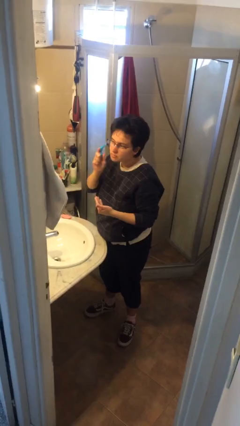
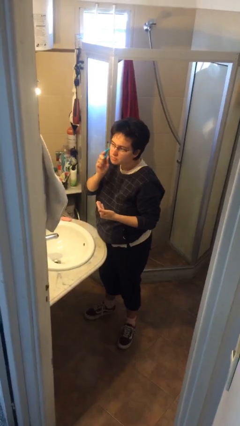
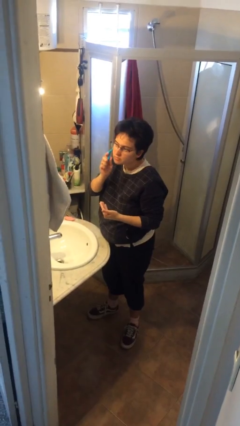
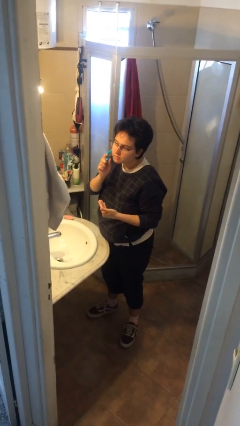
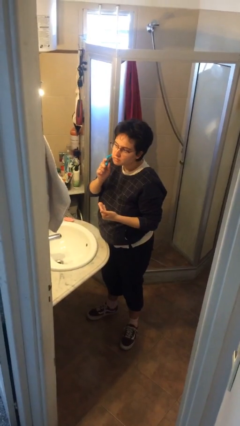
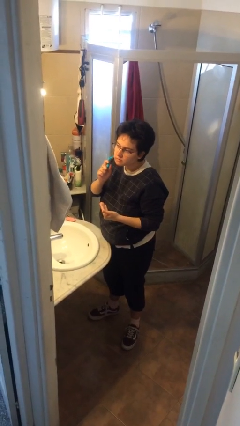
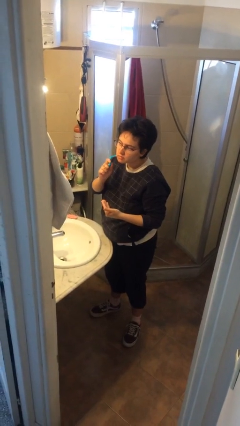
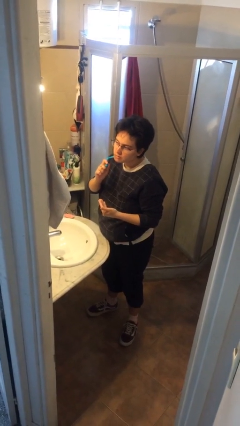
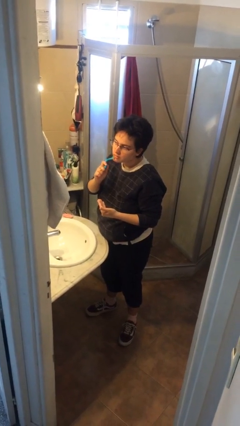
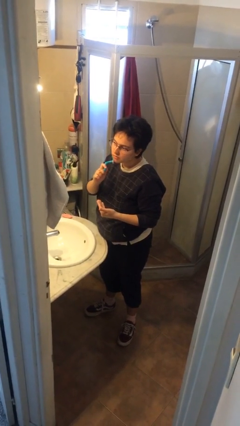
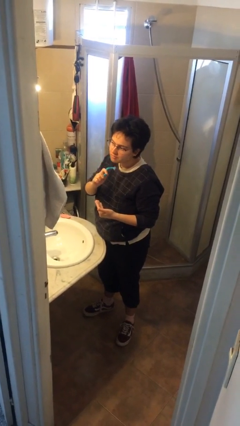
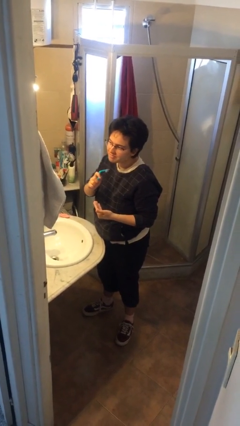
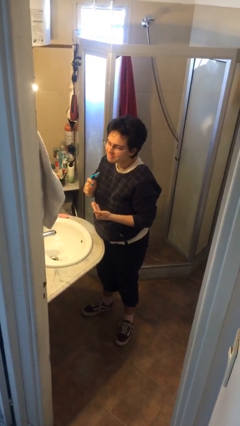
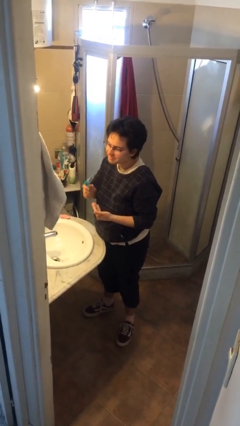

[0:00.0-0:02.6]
person shaves face

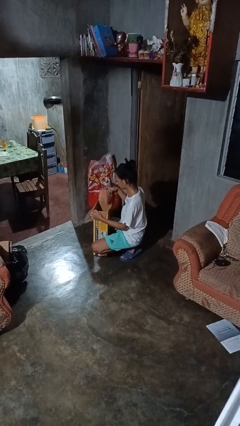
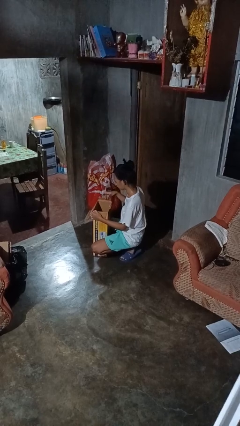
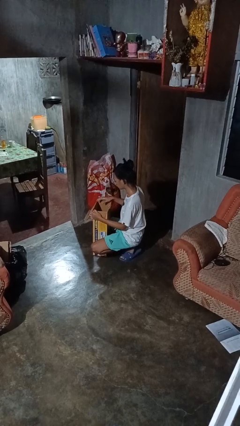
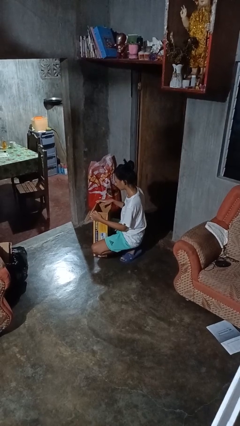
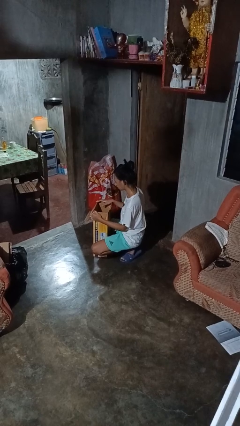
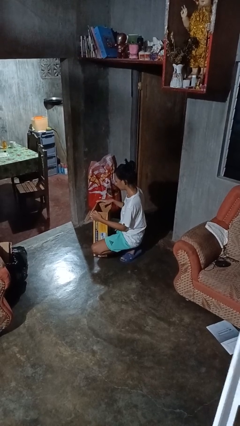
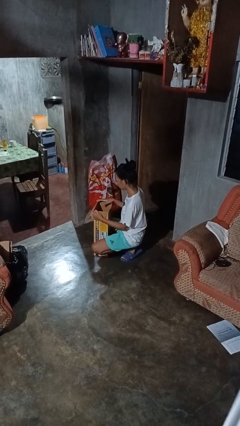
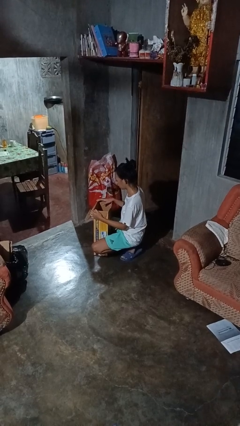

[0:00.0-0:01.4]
person puts object into box

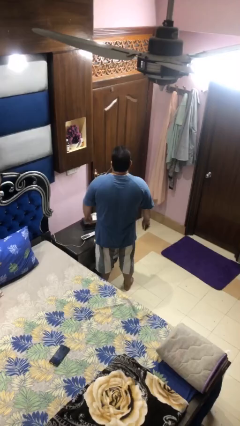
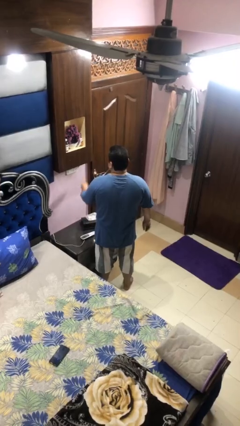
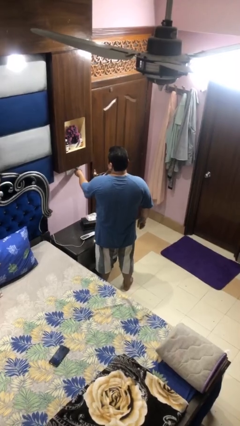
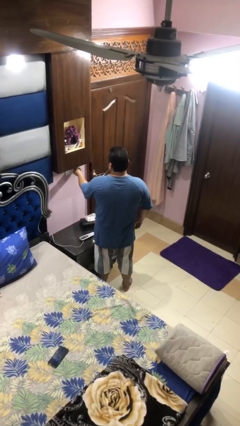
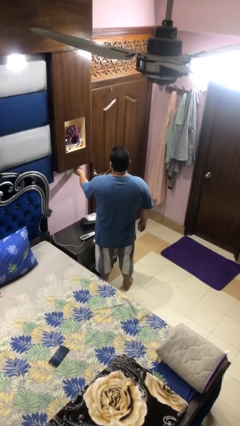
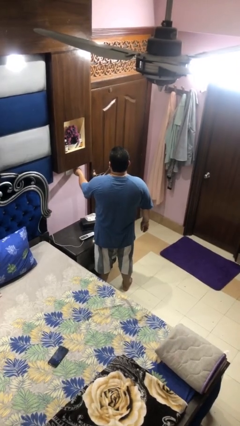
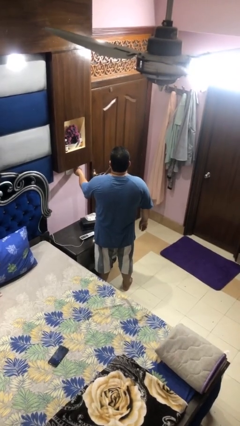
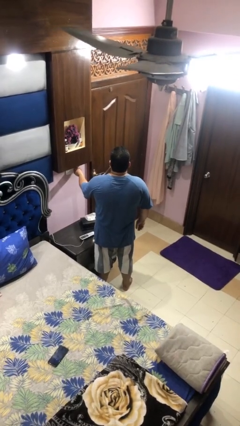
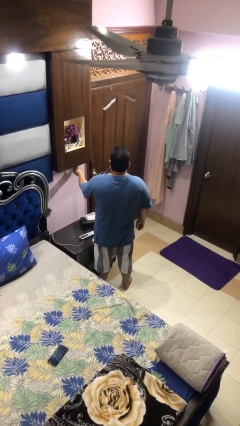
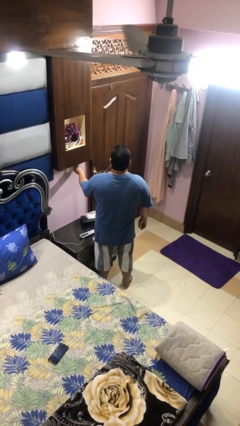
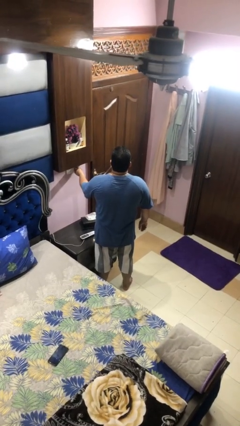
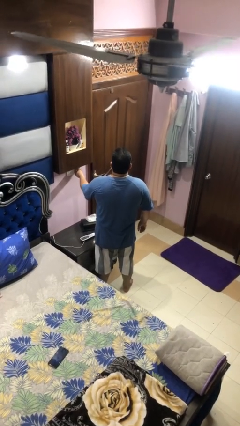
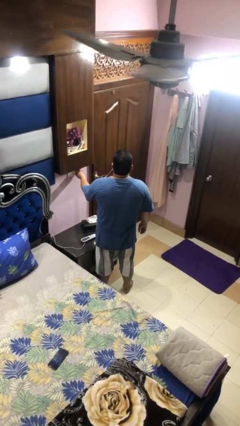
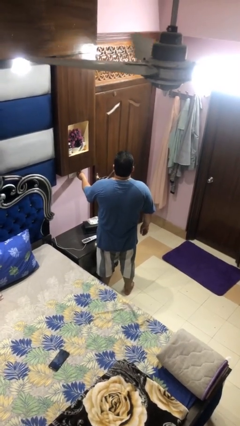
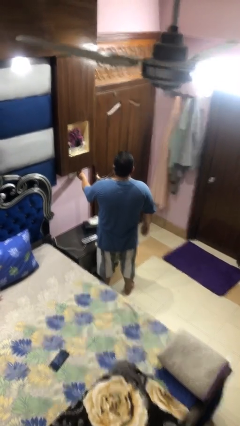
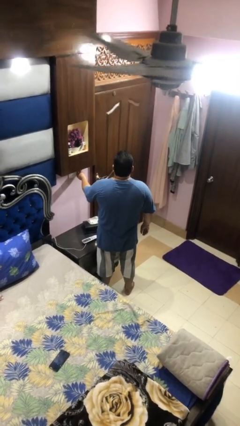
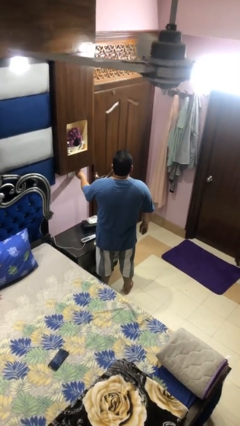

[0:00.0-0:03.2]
person turns on fan

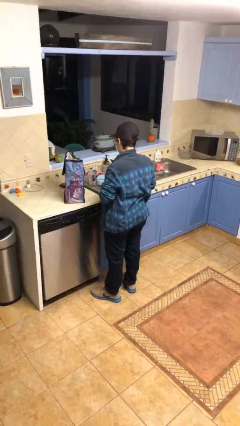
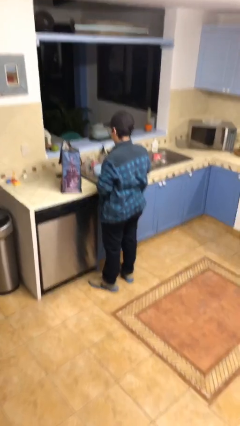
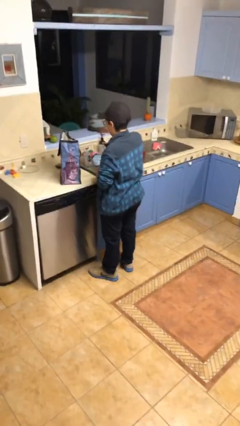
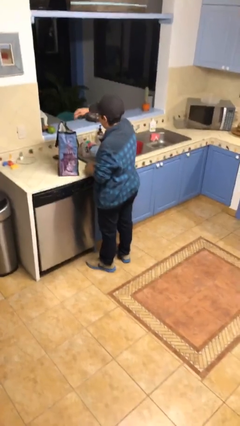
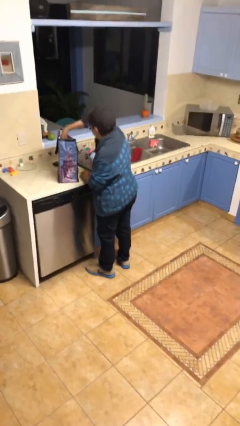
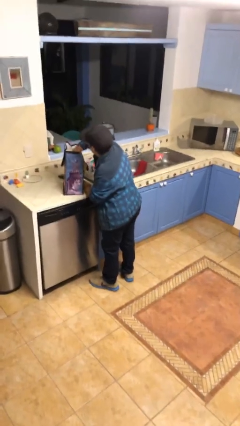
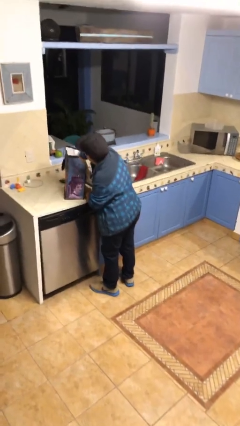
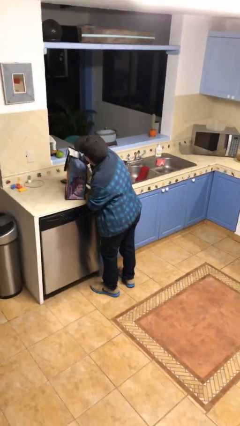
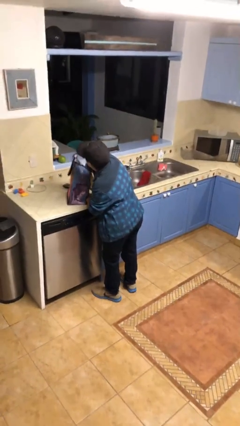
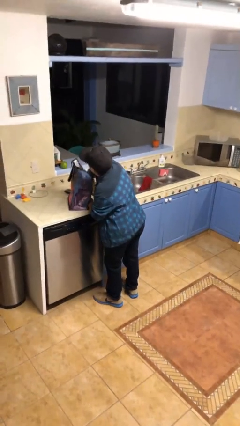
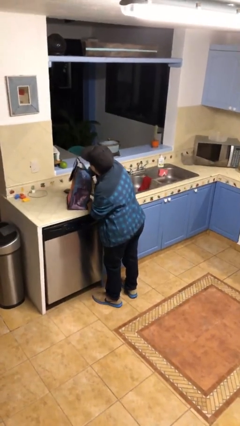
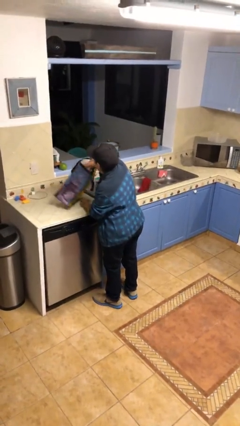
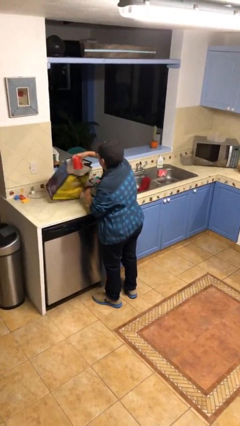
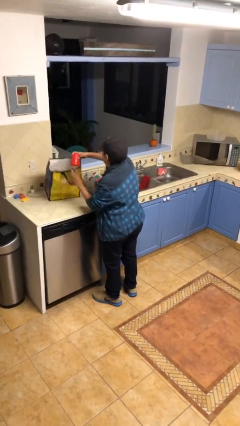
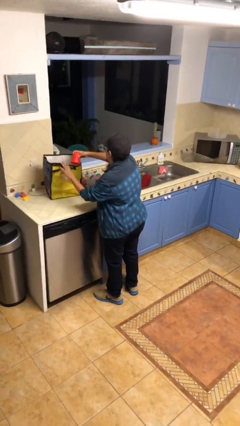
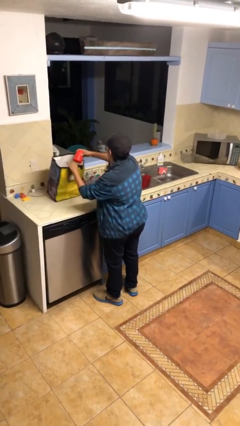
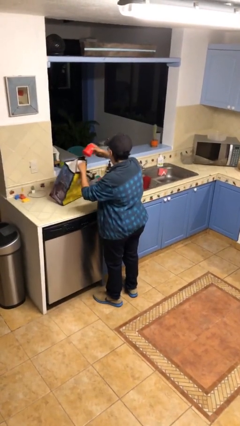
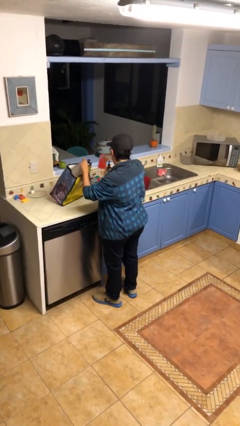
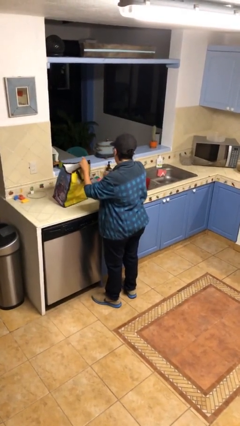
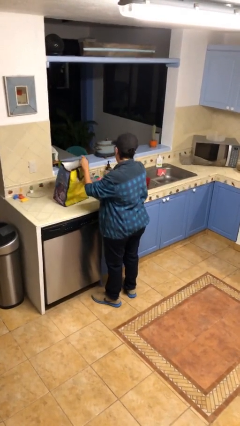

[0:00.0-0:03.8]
person takes object from bag

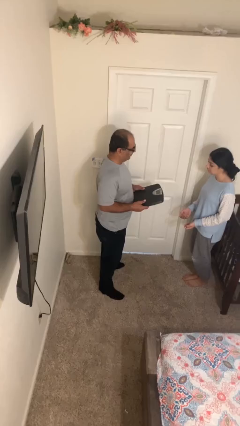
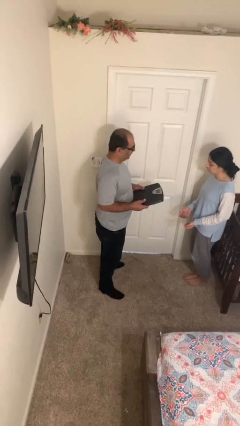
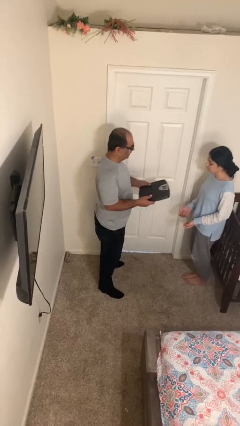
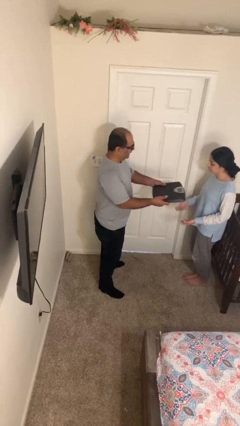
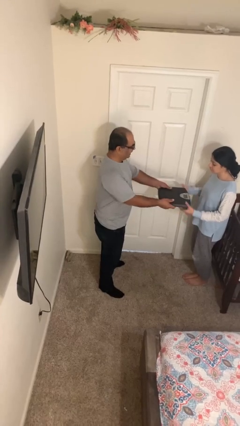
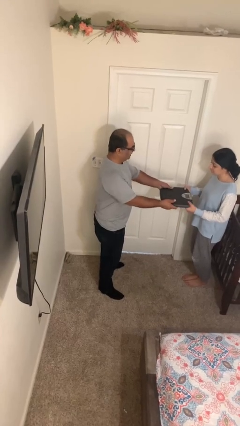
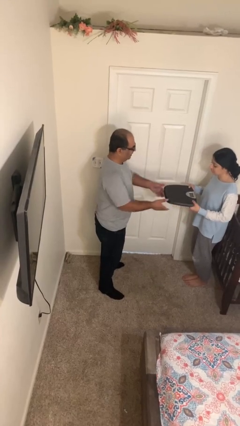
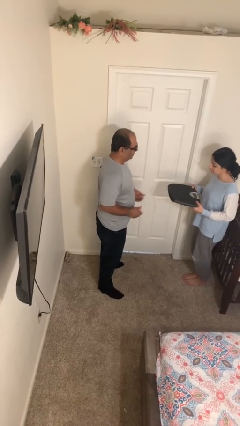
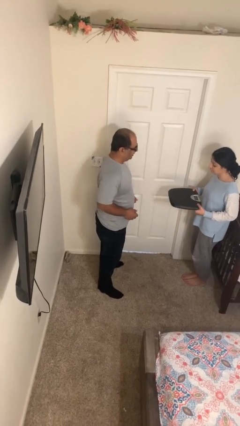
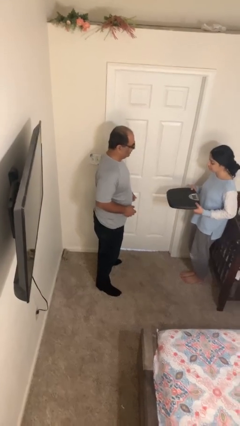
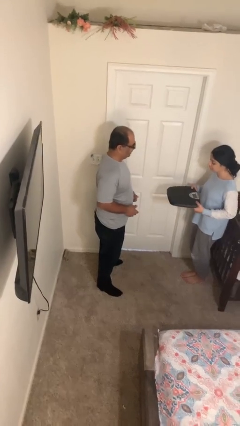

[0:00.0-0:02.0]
person transfers object to person

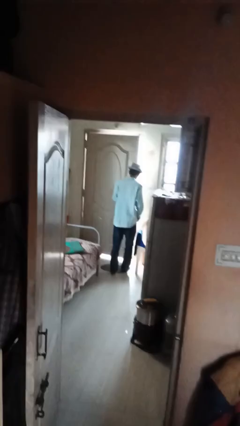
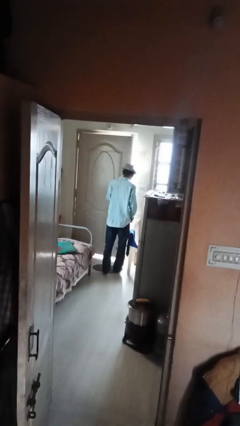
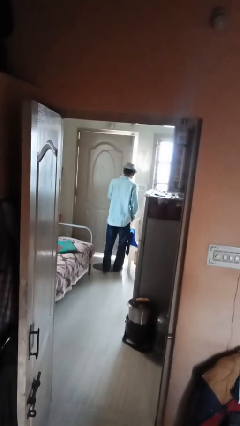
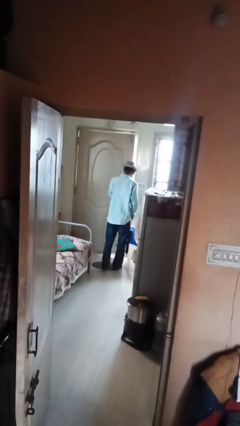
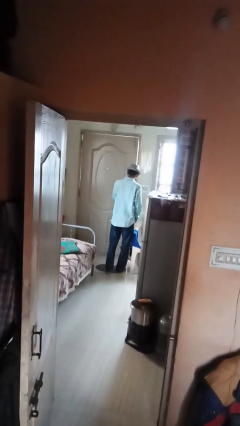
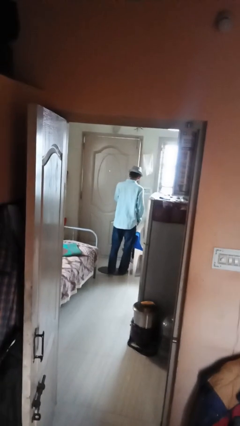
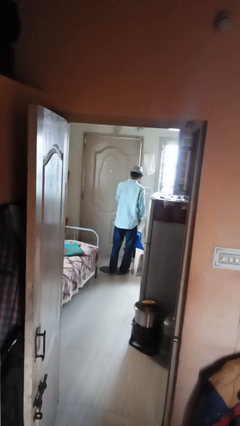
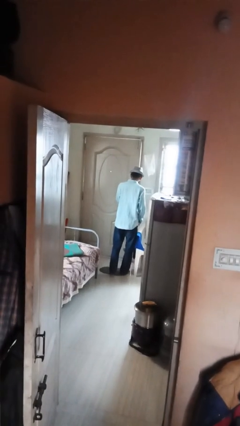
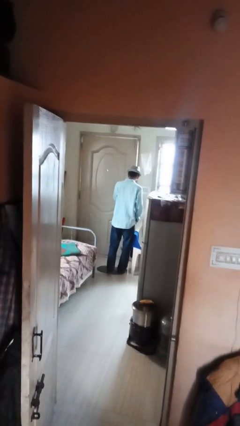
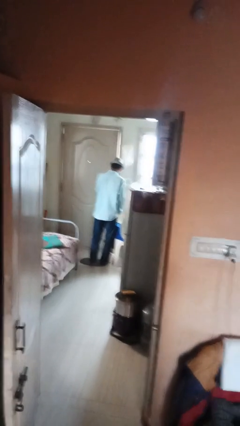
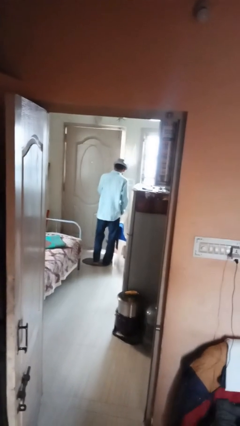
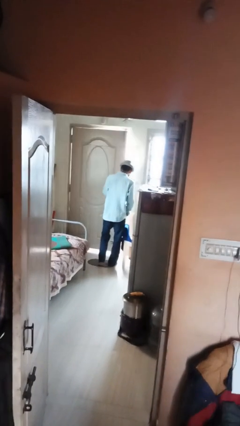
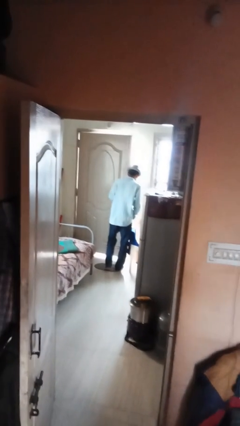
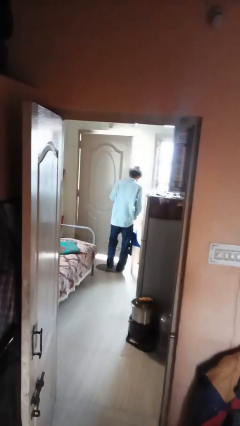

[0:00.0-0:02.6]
person closes facility door

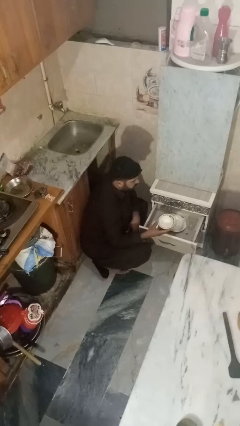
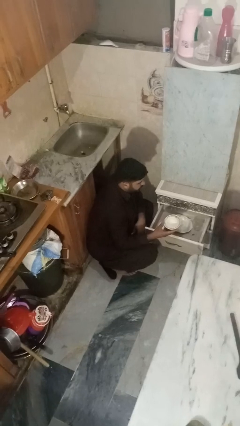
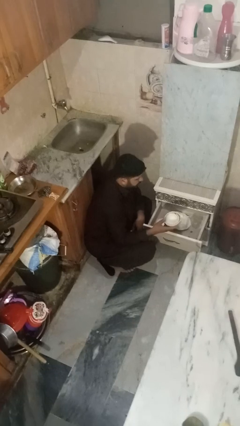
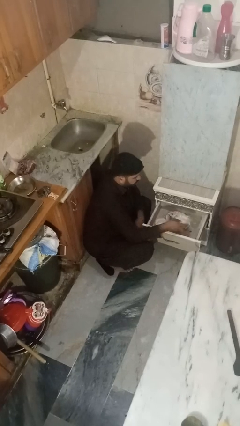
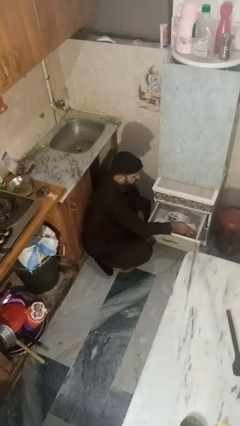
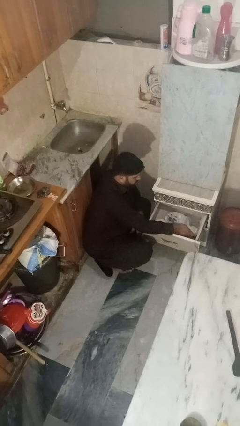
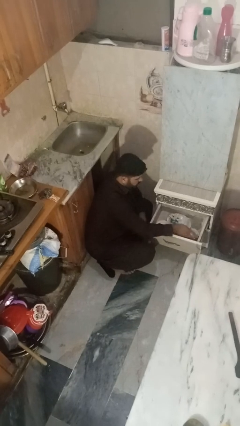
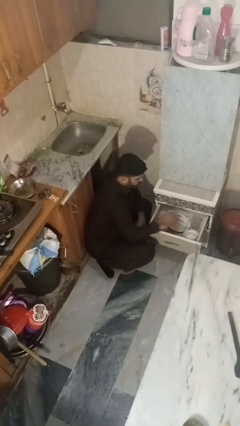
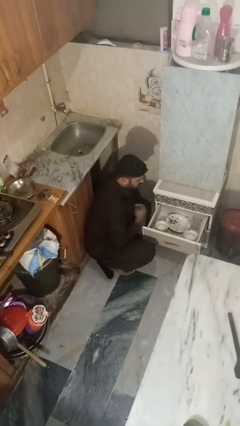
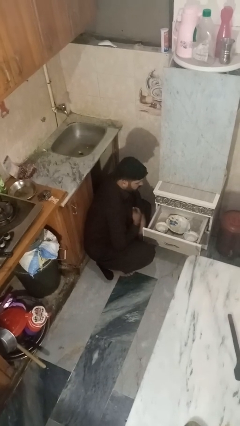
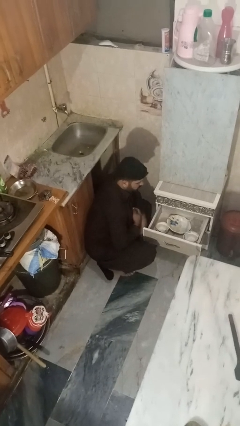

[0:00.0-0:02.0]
person puts object into kitchen drawer
